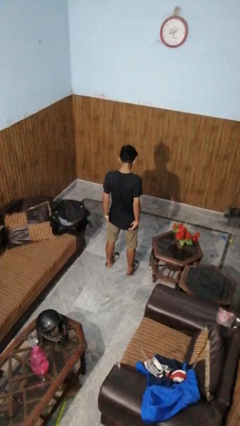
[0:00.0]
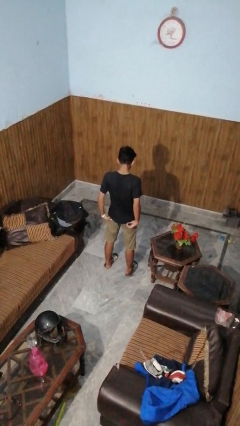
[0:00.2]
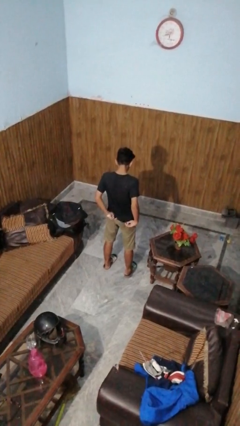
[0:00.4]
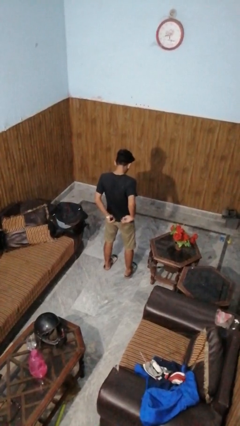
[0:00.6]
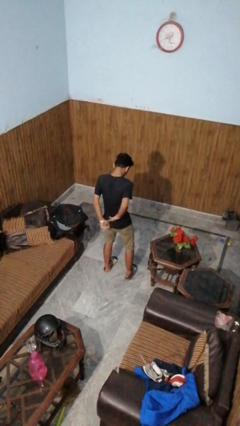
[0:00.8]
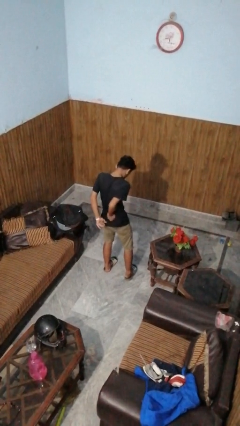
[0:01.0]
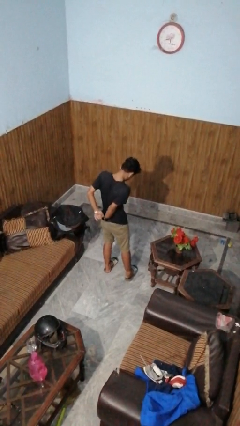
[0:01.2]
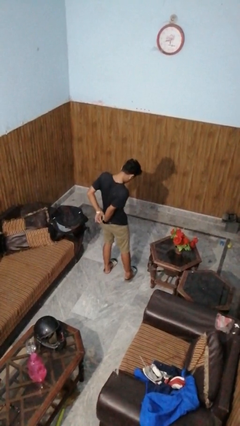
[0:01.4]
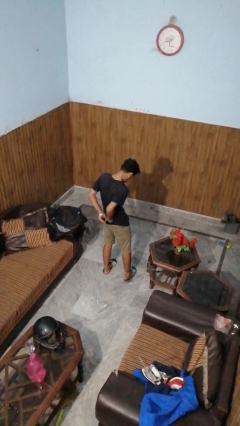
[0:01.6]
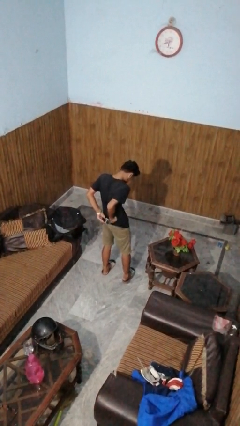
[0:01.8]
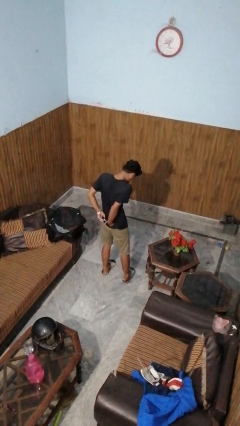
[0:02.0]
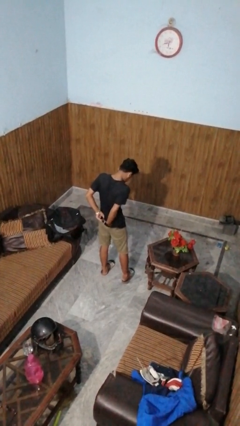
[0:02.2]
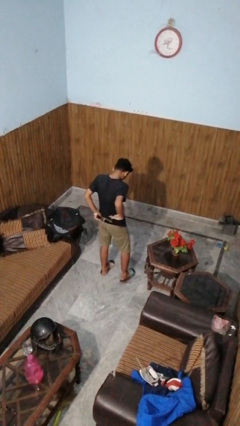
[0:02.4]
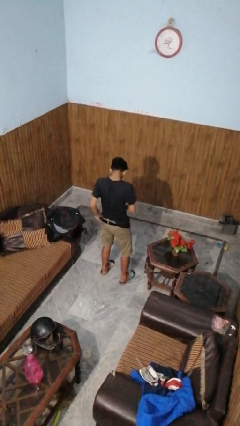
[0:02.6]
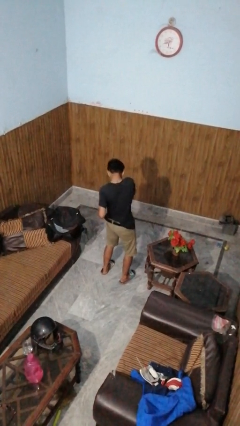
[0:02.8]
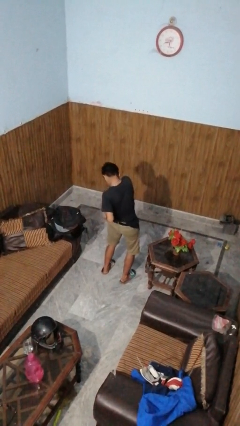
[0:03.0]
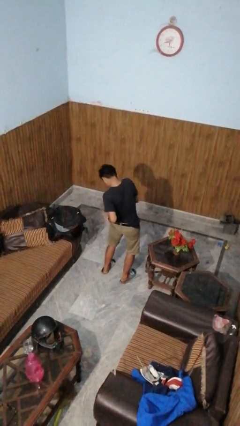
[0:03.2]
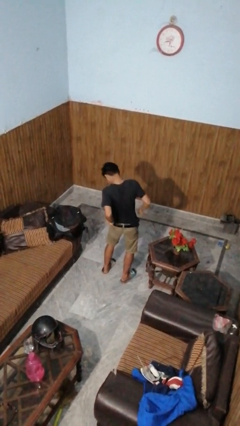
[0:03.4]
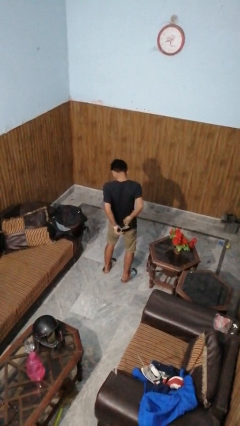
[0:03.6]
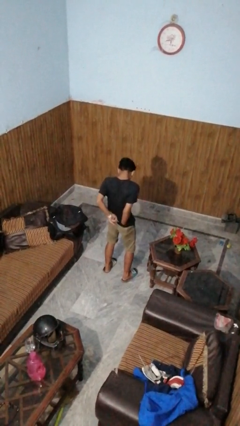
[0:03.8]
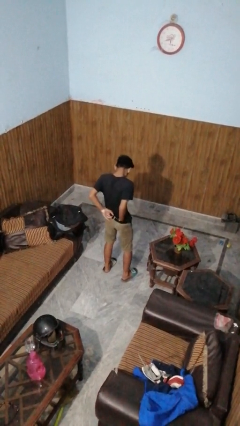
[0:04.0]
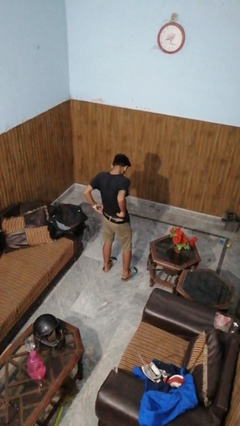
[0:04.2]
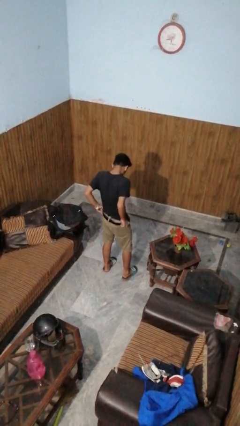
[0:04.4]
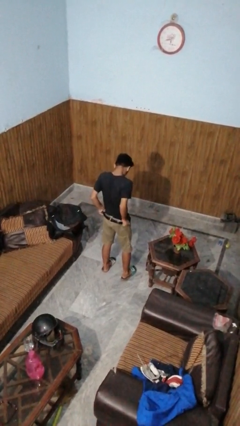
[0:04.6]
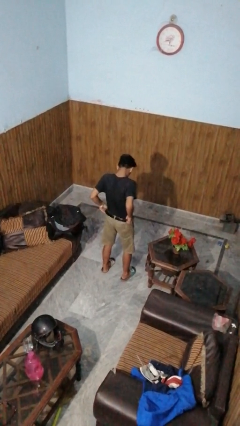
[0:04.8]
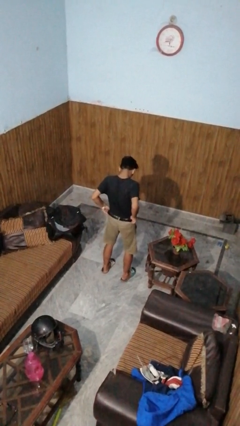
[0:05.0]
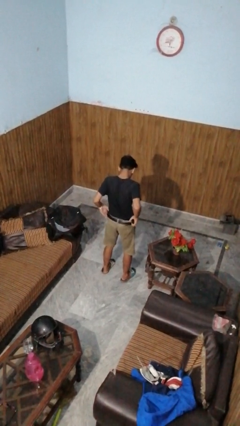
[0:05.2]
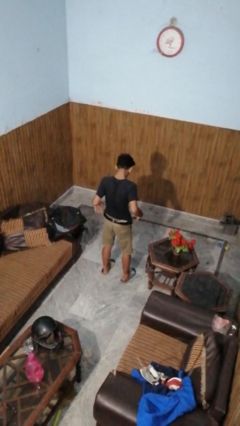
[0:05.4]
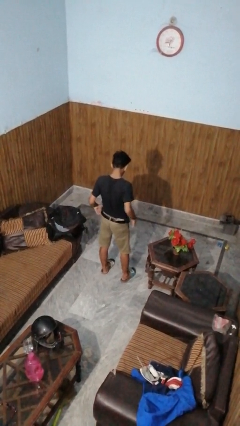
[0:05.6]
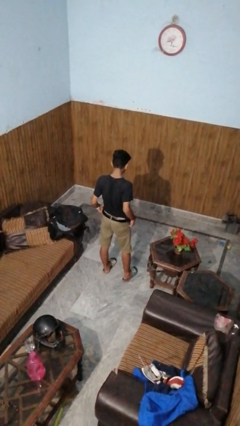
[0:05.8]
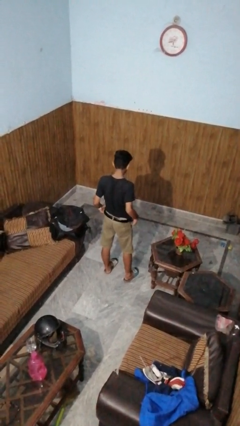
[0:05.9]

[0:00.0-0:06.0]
person tucks in shirt

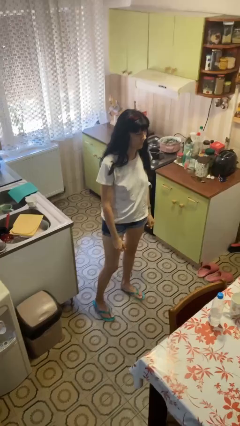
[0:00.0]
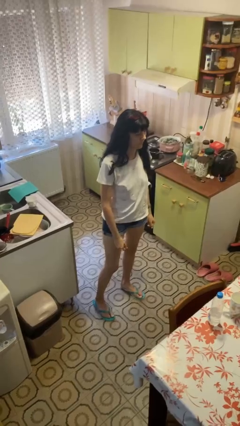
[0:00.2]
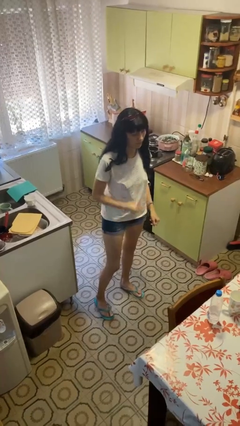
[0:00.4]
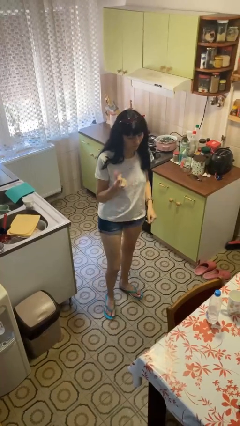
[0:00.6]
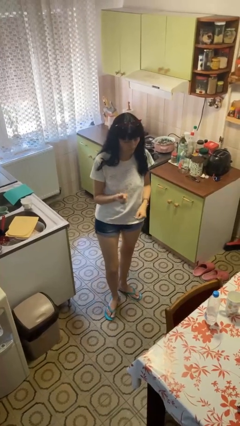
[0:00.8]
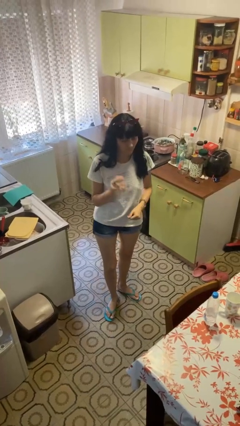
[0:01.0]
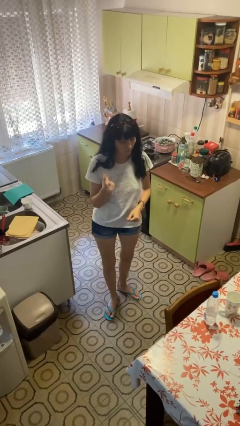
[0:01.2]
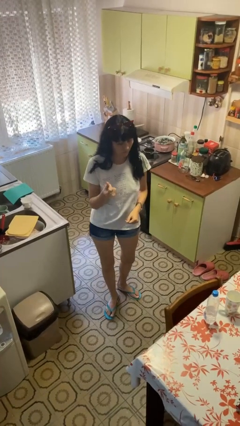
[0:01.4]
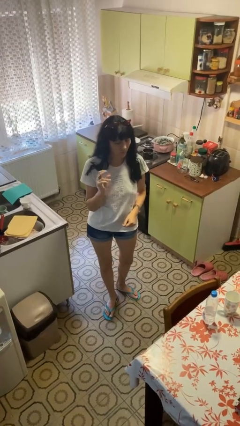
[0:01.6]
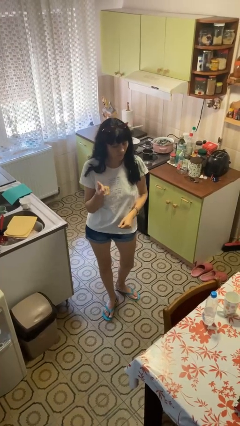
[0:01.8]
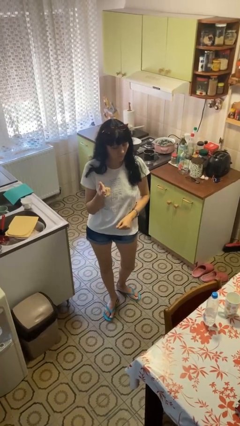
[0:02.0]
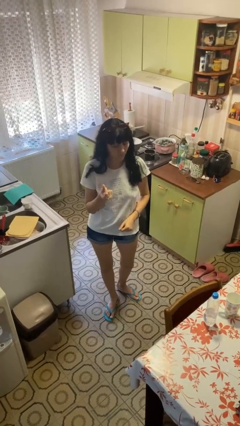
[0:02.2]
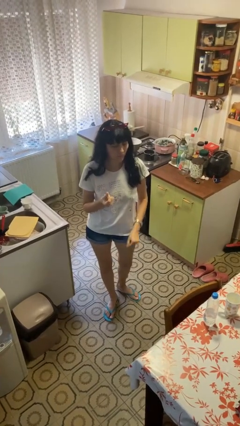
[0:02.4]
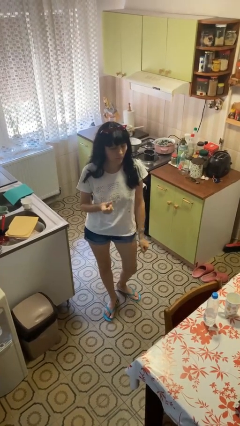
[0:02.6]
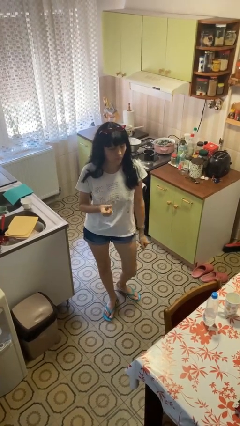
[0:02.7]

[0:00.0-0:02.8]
person snaps fingers

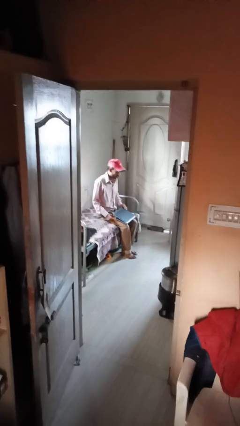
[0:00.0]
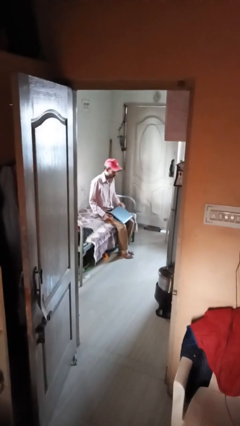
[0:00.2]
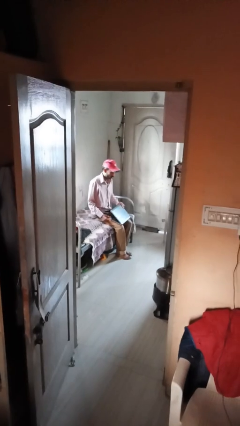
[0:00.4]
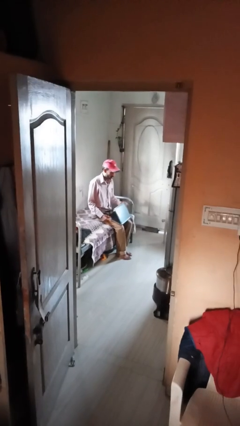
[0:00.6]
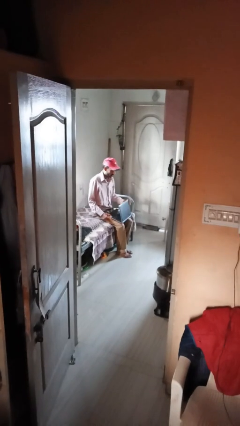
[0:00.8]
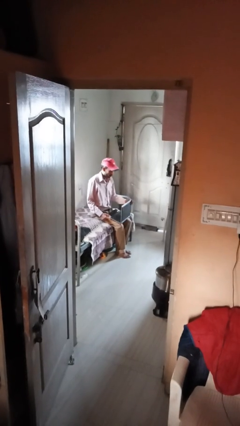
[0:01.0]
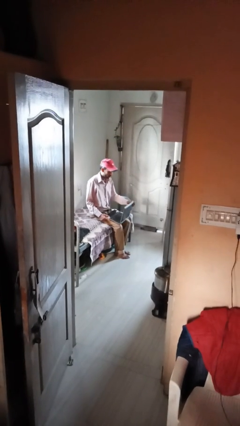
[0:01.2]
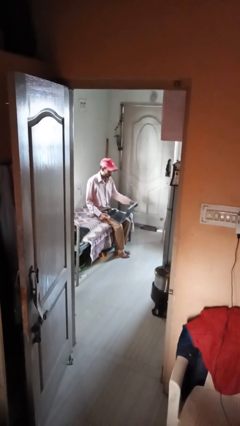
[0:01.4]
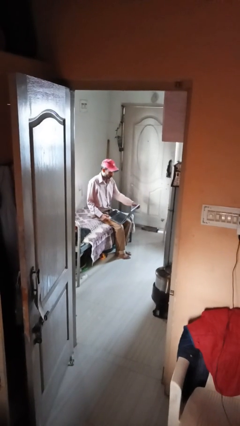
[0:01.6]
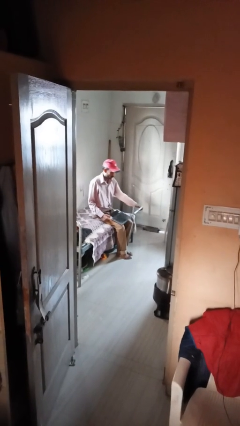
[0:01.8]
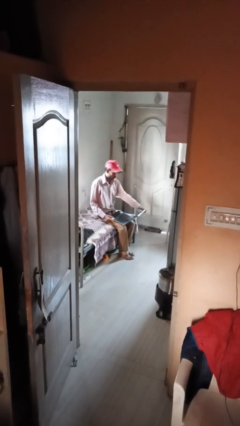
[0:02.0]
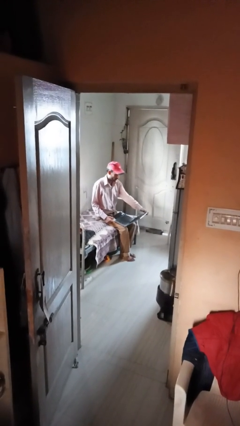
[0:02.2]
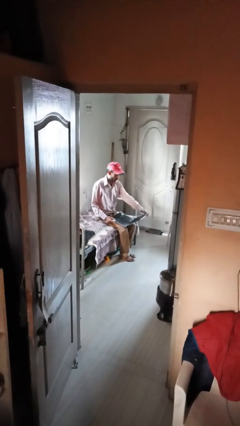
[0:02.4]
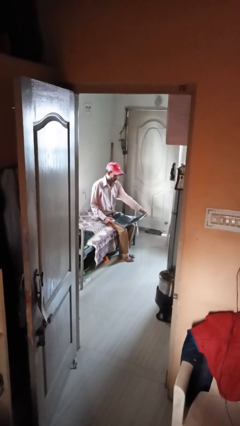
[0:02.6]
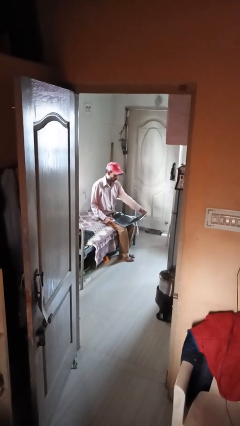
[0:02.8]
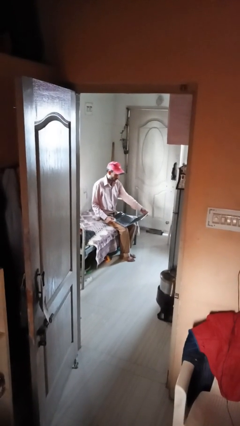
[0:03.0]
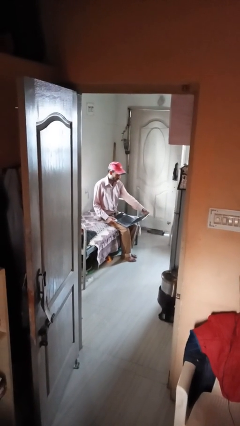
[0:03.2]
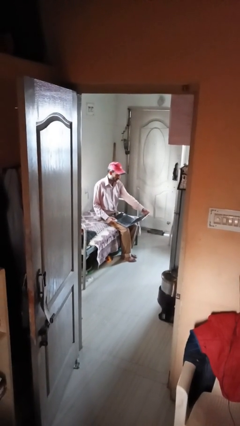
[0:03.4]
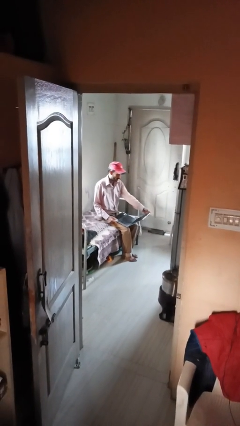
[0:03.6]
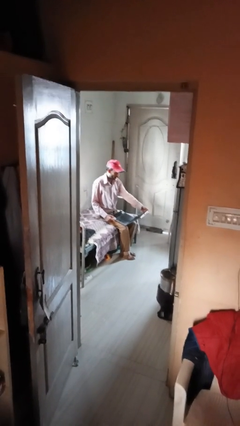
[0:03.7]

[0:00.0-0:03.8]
person opens laptop

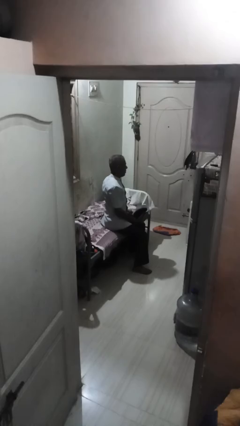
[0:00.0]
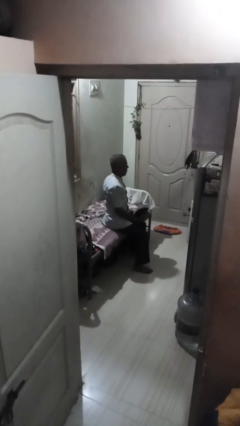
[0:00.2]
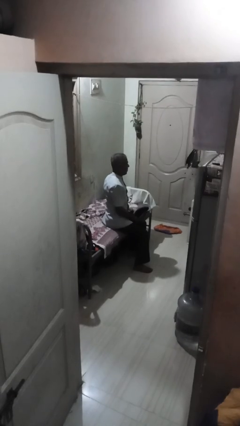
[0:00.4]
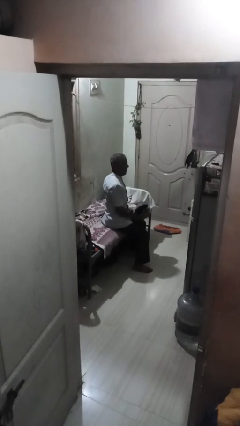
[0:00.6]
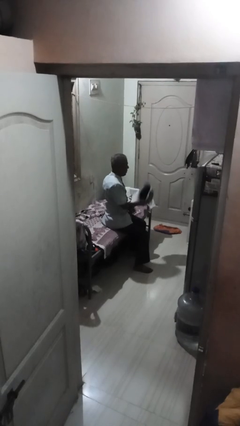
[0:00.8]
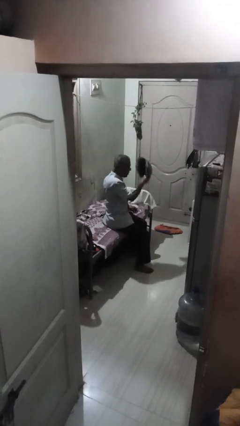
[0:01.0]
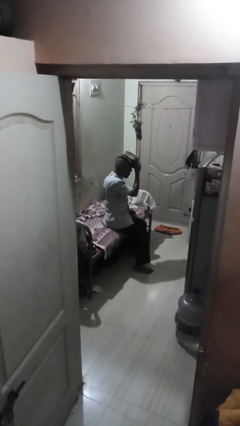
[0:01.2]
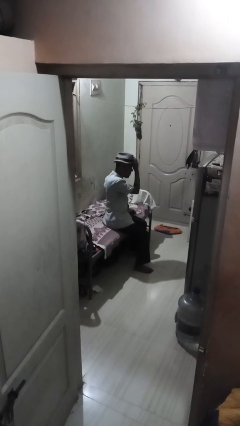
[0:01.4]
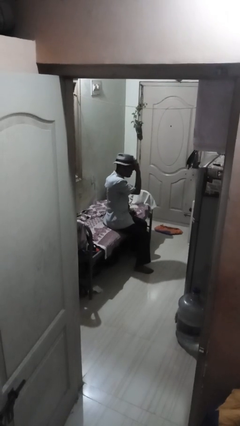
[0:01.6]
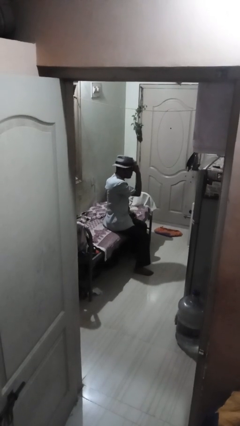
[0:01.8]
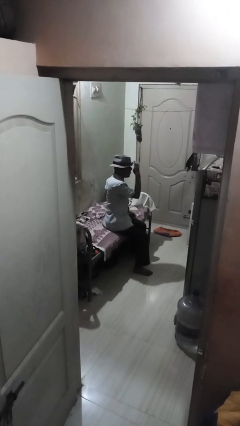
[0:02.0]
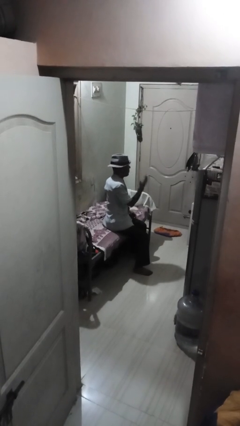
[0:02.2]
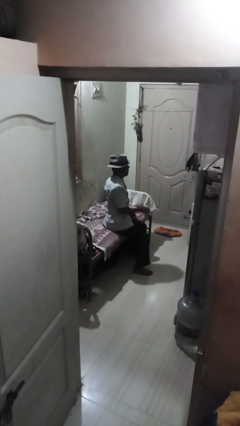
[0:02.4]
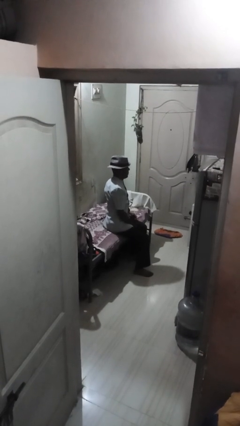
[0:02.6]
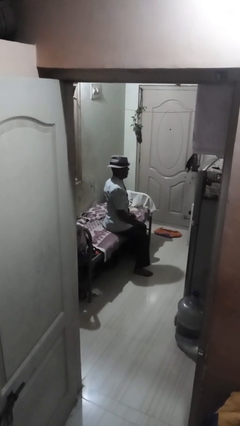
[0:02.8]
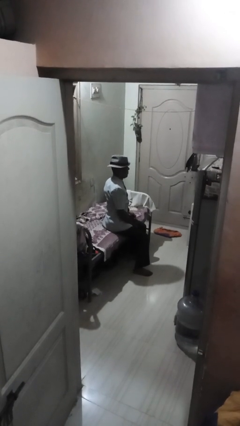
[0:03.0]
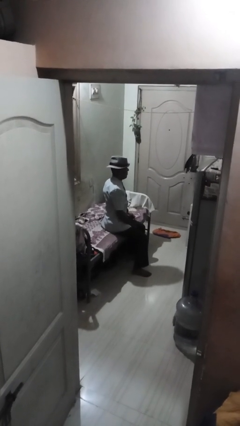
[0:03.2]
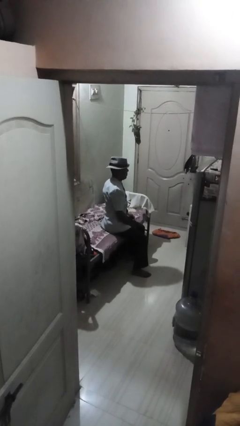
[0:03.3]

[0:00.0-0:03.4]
person puts on hat

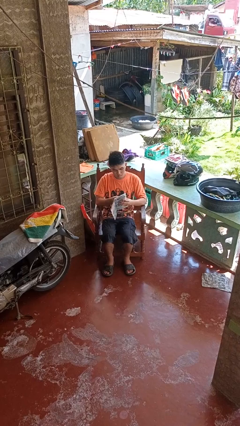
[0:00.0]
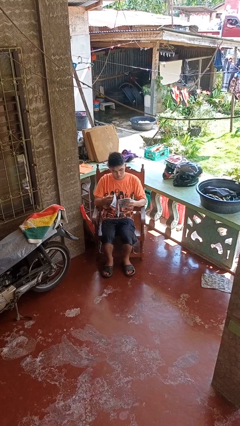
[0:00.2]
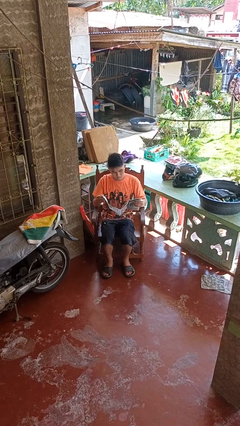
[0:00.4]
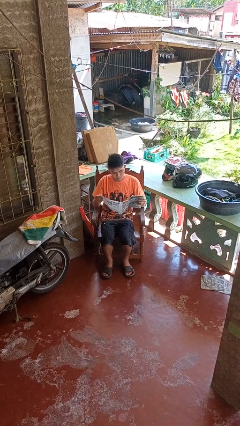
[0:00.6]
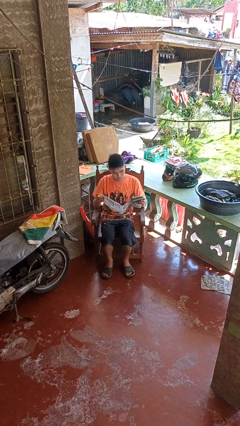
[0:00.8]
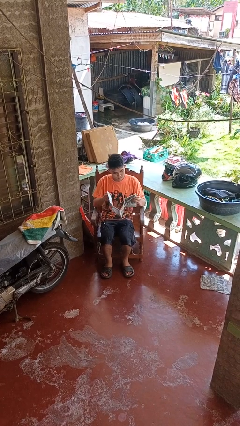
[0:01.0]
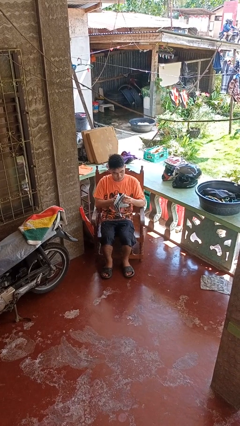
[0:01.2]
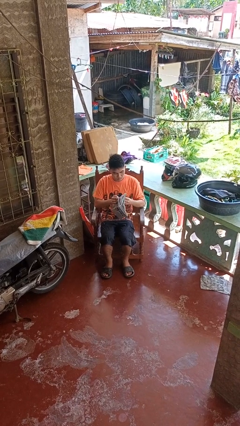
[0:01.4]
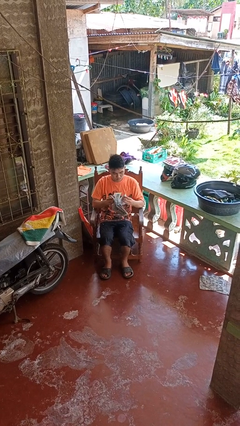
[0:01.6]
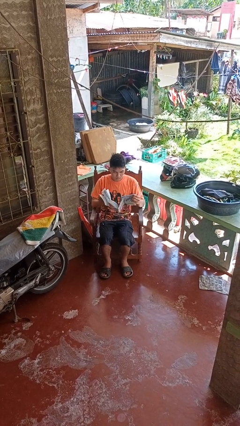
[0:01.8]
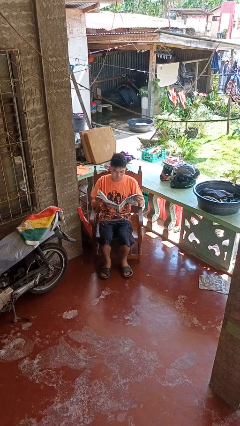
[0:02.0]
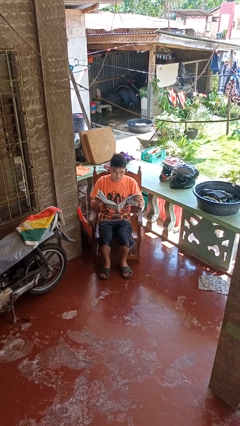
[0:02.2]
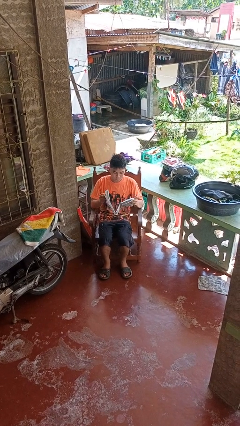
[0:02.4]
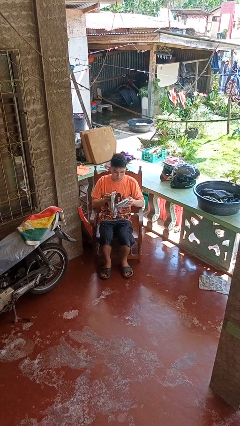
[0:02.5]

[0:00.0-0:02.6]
person reads newspaper
